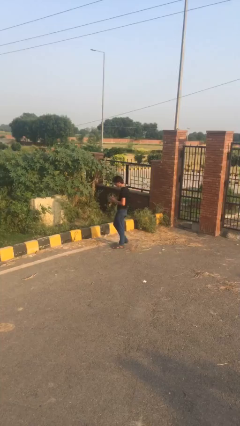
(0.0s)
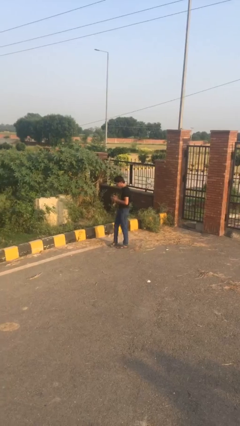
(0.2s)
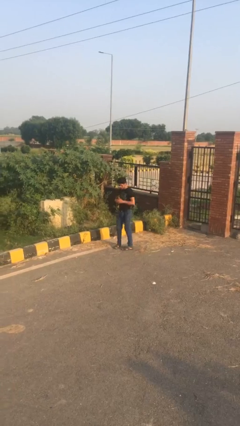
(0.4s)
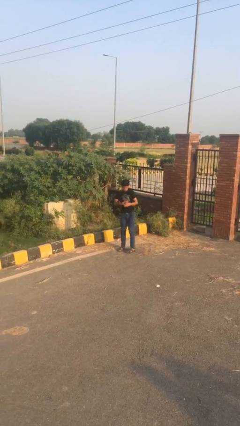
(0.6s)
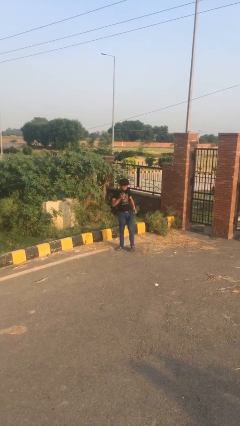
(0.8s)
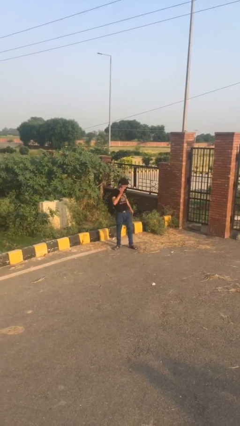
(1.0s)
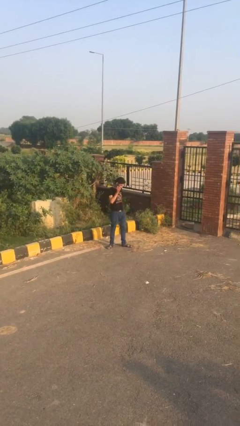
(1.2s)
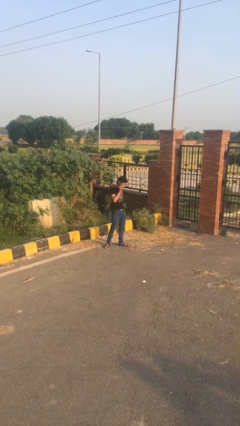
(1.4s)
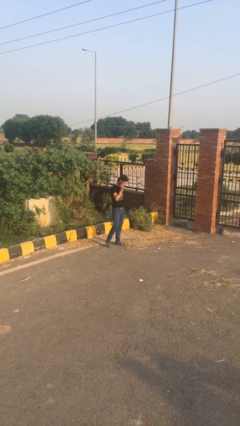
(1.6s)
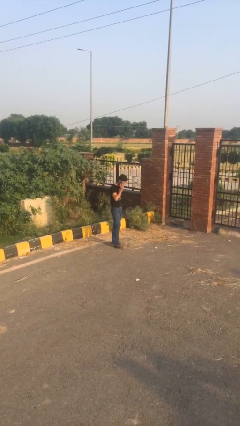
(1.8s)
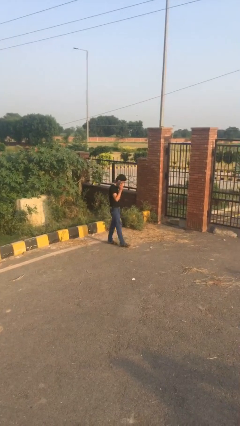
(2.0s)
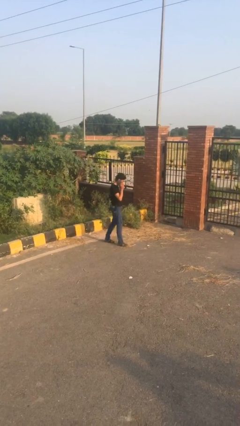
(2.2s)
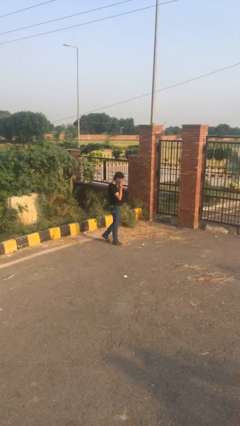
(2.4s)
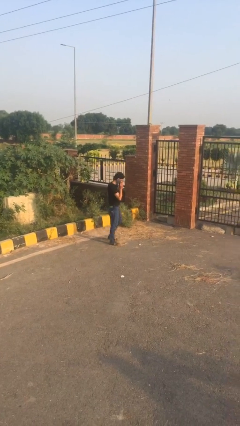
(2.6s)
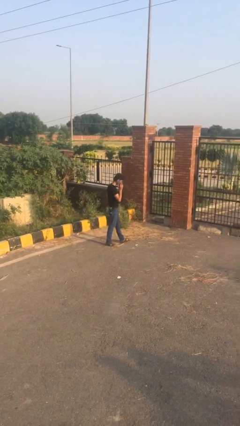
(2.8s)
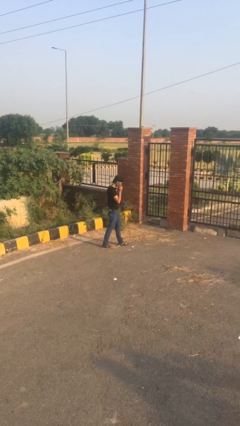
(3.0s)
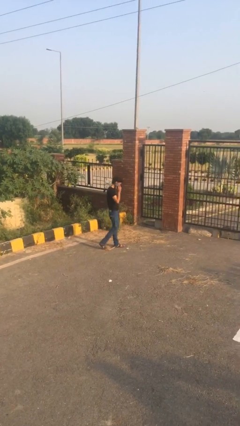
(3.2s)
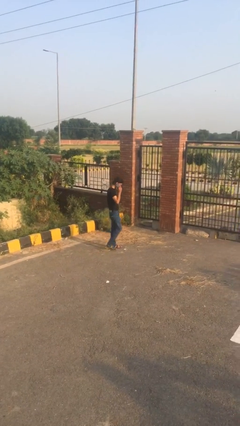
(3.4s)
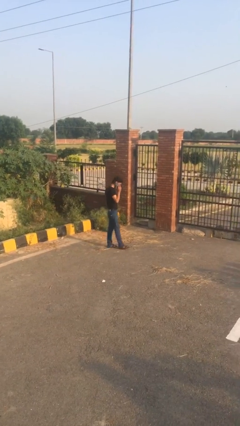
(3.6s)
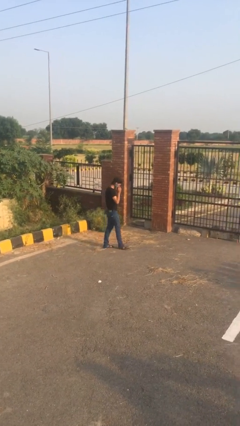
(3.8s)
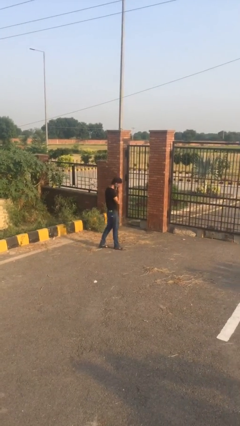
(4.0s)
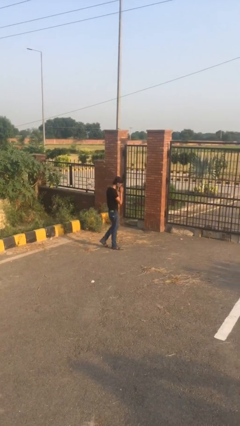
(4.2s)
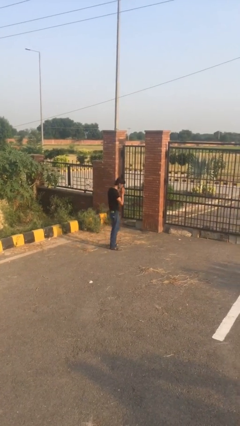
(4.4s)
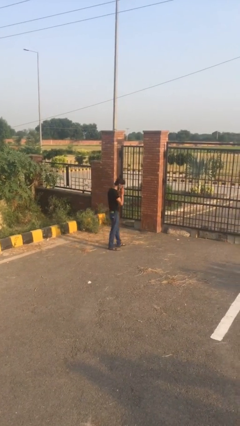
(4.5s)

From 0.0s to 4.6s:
person talks on phone

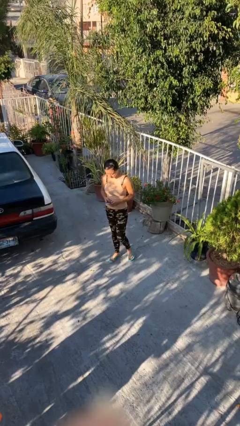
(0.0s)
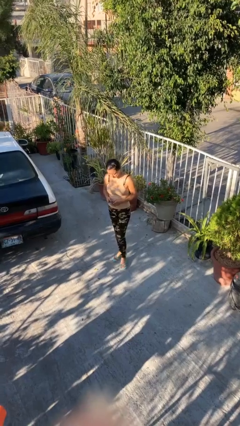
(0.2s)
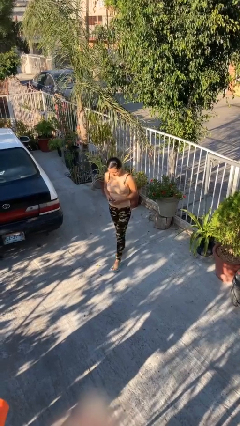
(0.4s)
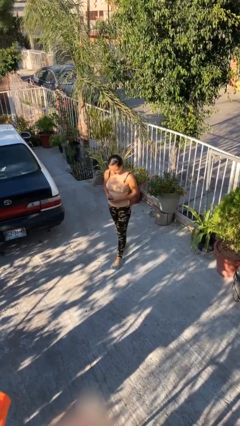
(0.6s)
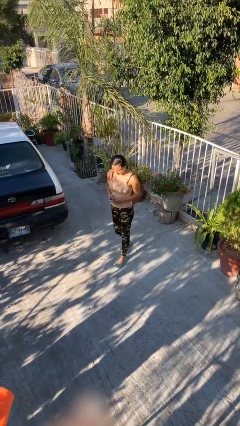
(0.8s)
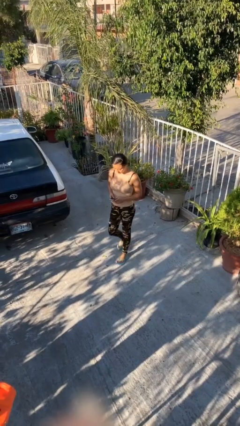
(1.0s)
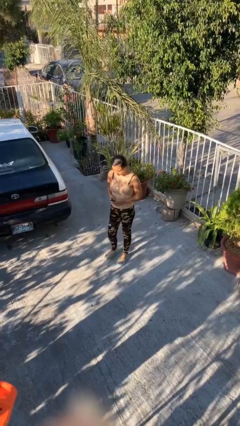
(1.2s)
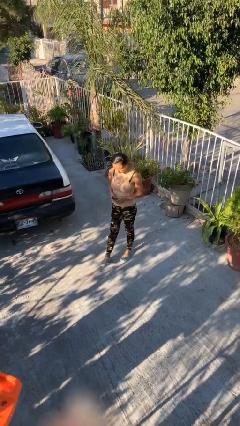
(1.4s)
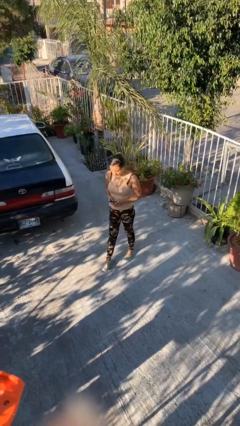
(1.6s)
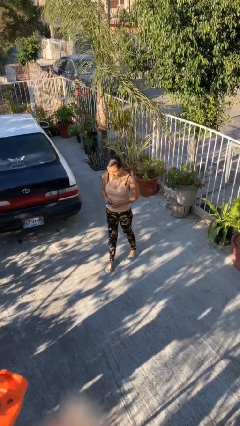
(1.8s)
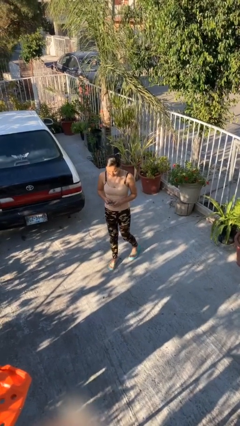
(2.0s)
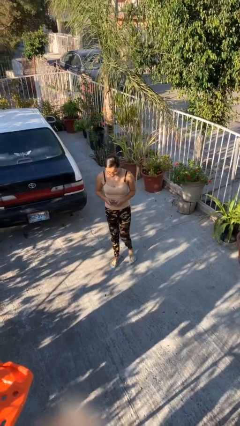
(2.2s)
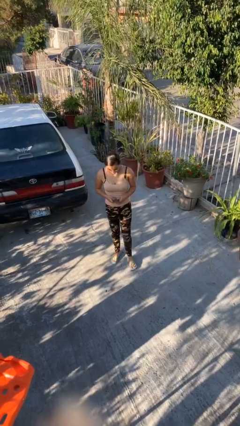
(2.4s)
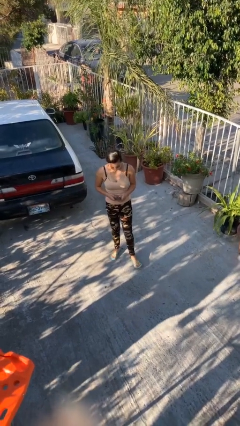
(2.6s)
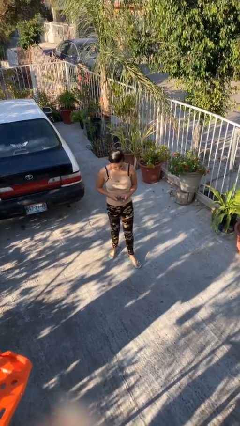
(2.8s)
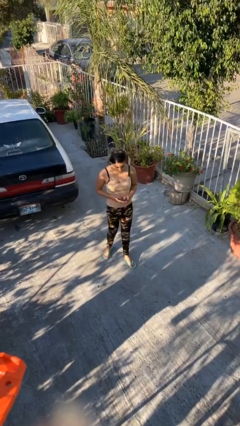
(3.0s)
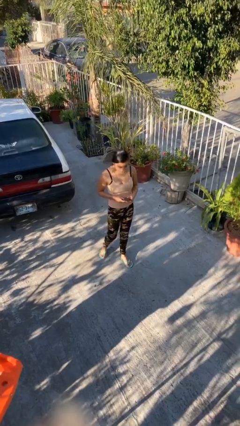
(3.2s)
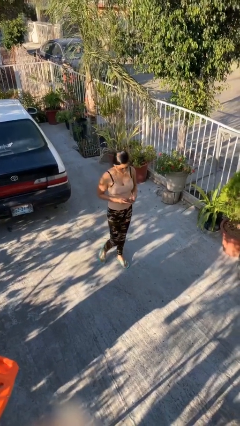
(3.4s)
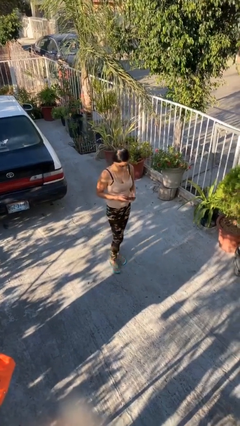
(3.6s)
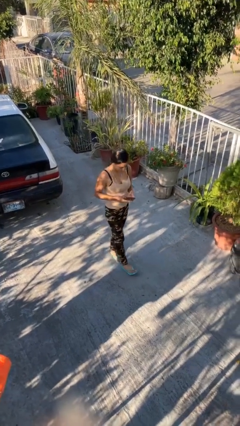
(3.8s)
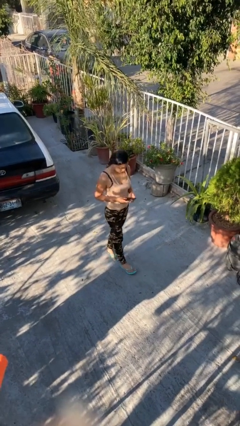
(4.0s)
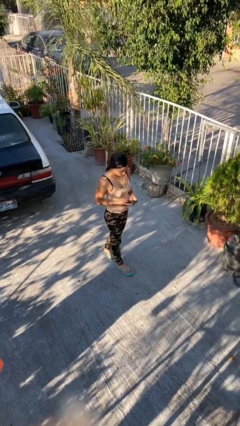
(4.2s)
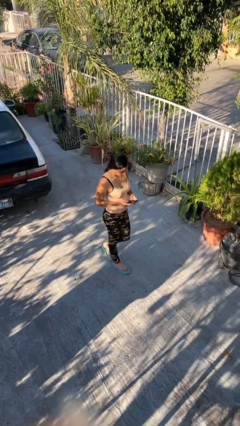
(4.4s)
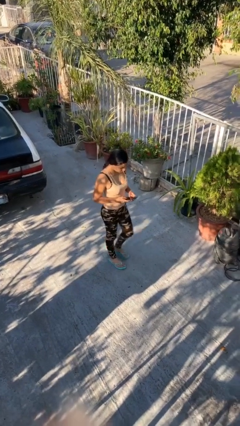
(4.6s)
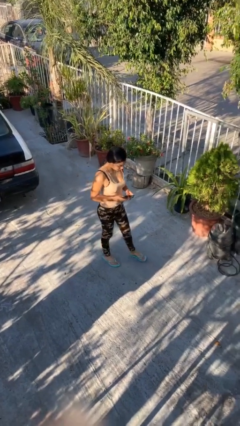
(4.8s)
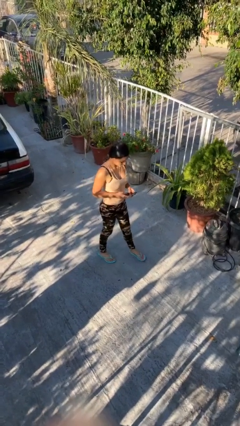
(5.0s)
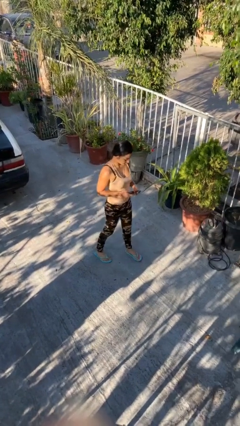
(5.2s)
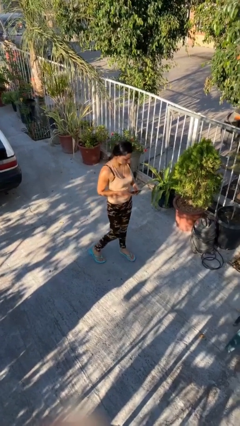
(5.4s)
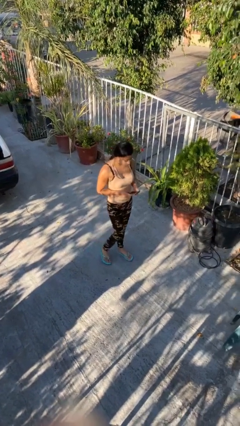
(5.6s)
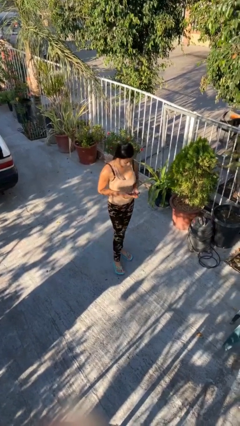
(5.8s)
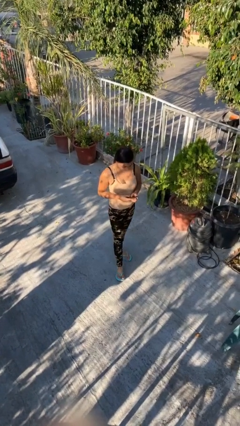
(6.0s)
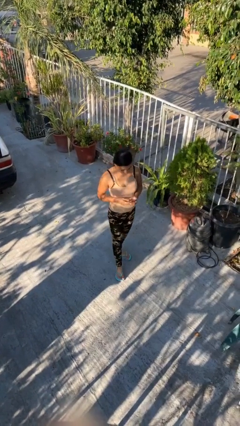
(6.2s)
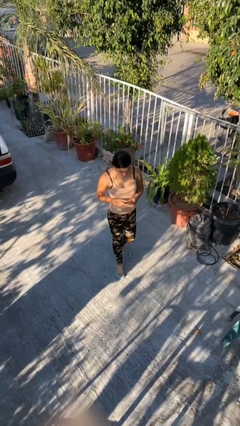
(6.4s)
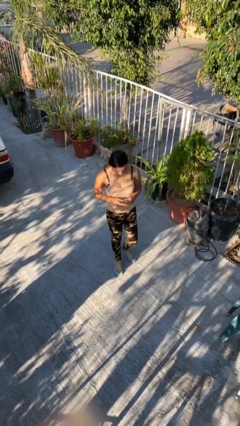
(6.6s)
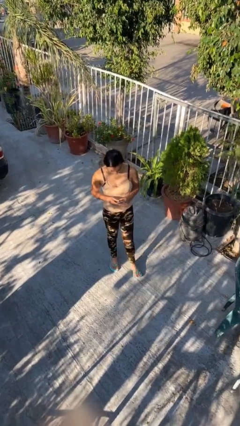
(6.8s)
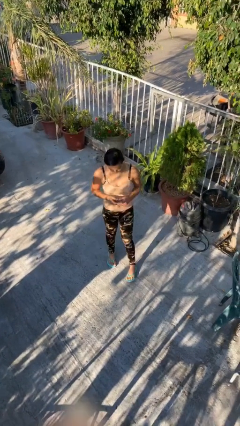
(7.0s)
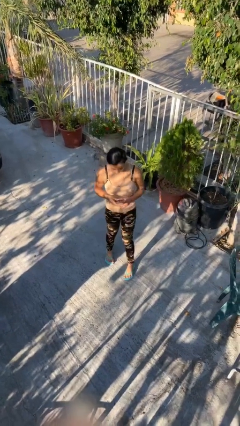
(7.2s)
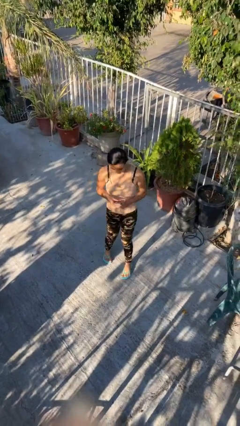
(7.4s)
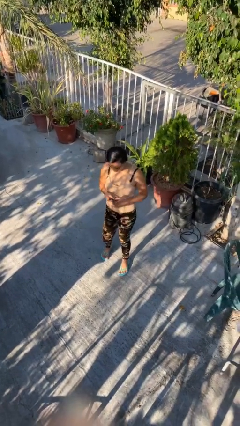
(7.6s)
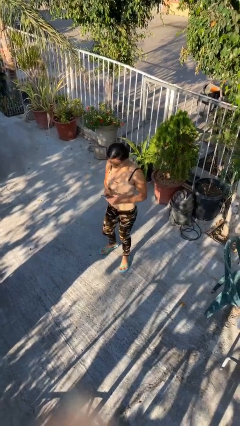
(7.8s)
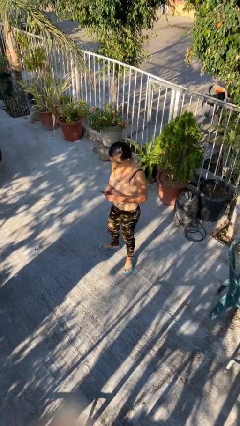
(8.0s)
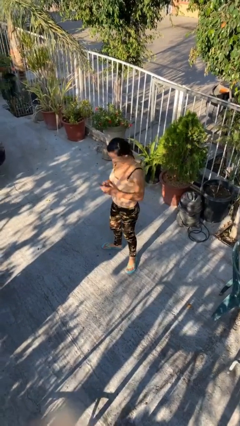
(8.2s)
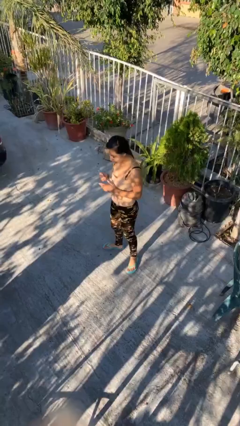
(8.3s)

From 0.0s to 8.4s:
person texts on phone

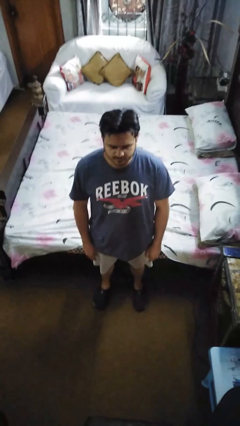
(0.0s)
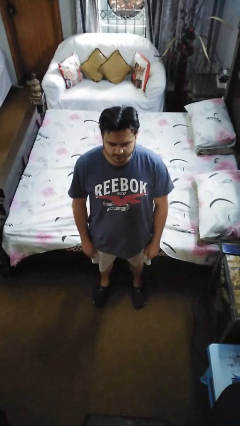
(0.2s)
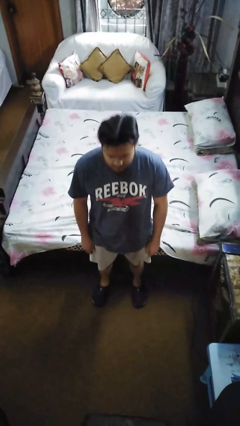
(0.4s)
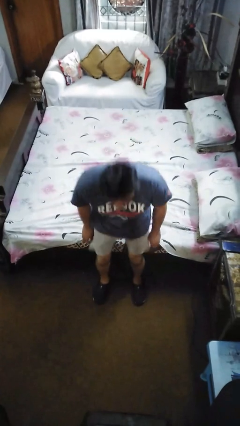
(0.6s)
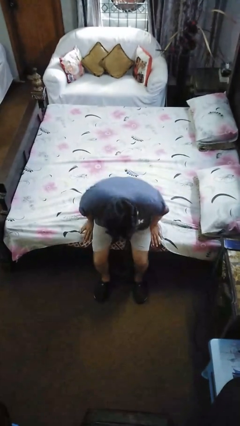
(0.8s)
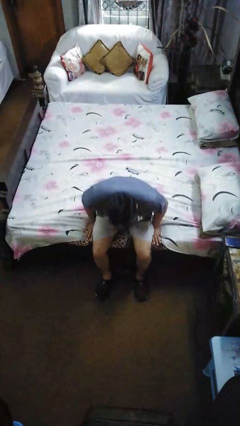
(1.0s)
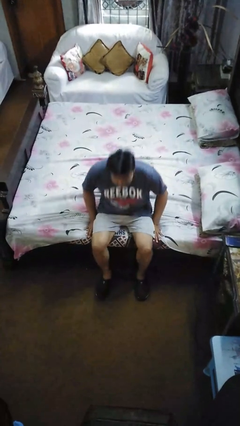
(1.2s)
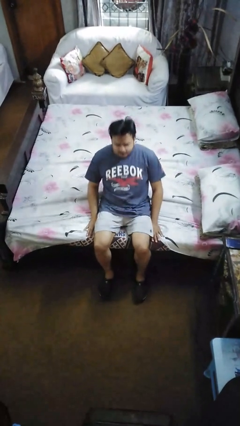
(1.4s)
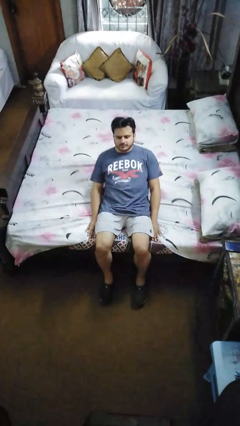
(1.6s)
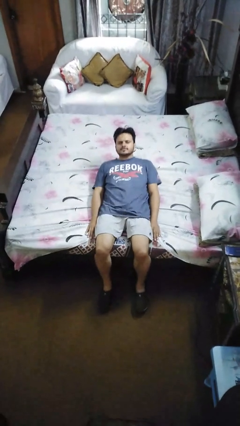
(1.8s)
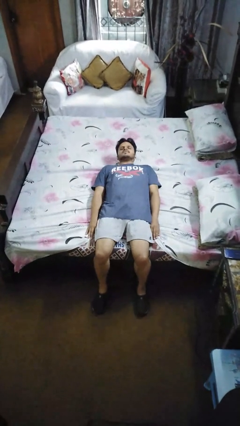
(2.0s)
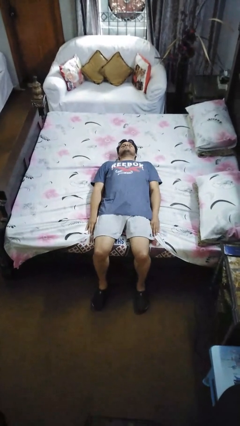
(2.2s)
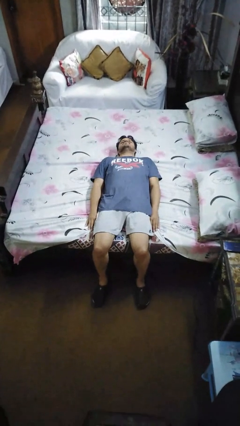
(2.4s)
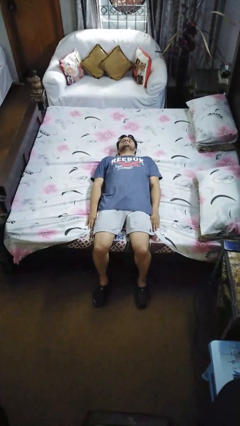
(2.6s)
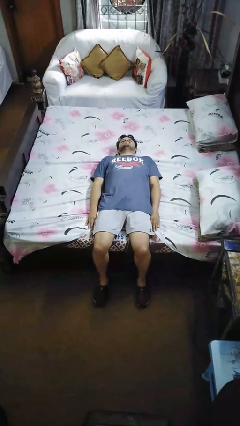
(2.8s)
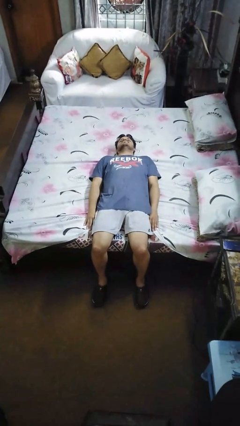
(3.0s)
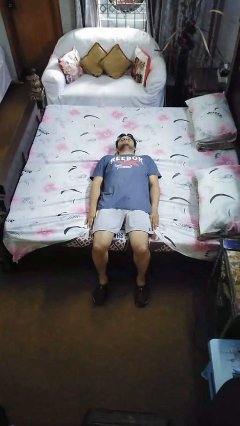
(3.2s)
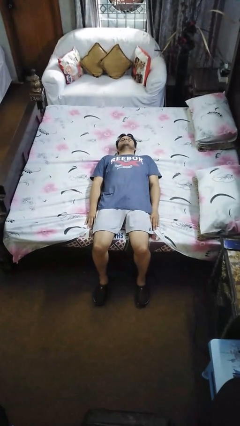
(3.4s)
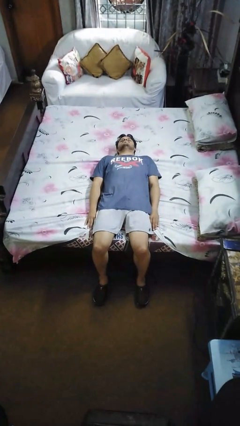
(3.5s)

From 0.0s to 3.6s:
person lies down on bed

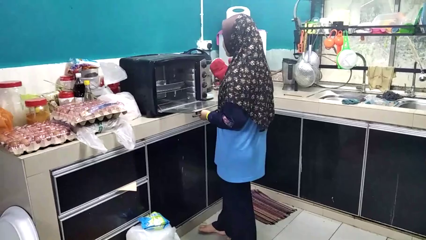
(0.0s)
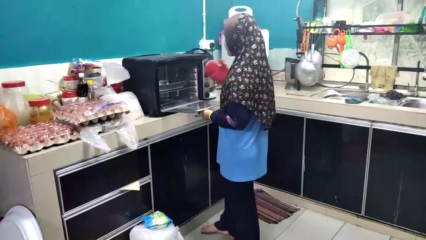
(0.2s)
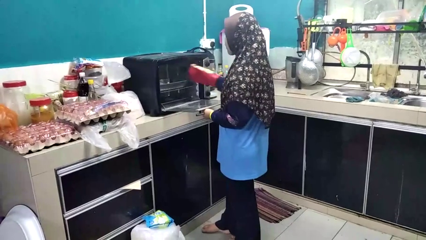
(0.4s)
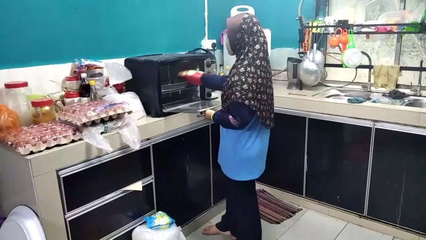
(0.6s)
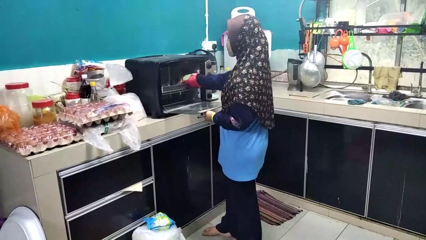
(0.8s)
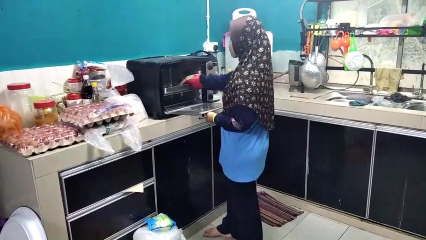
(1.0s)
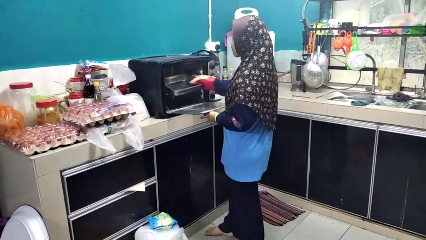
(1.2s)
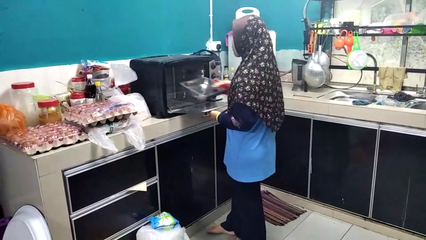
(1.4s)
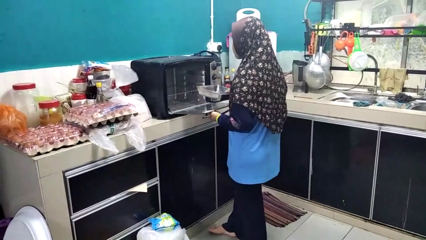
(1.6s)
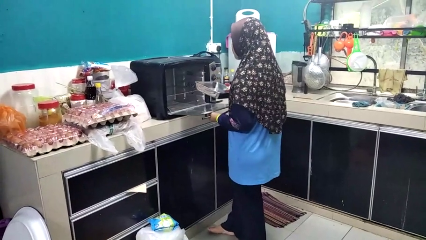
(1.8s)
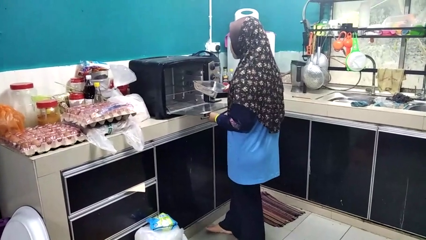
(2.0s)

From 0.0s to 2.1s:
person takes object from oven
